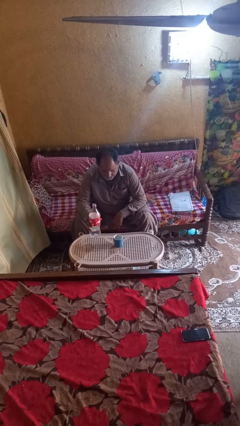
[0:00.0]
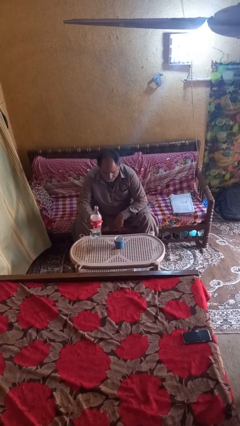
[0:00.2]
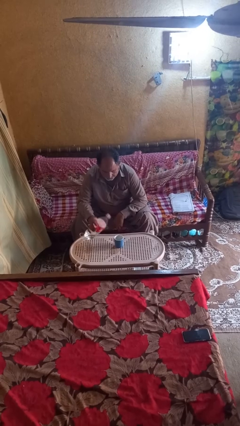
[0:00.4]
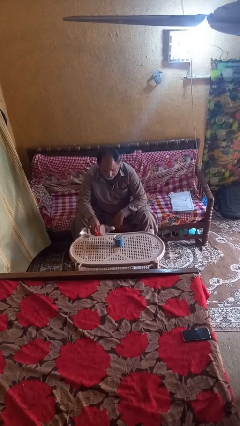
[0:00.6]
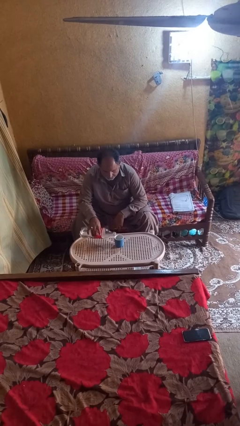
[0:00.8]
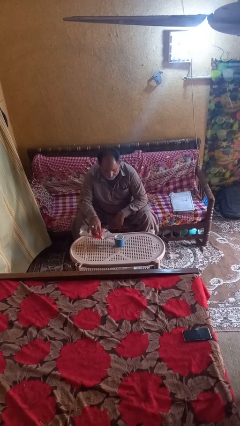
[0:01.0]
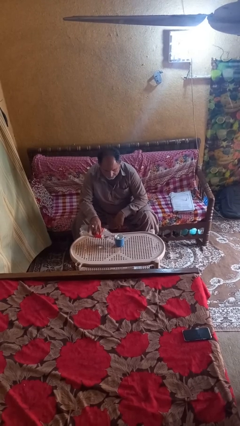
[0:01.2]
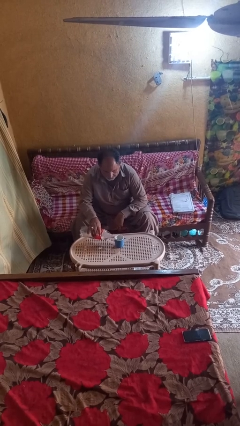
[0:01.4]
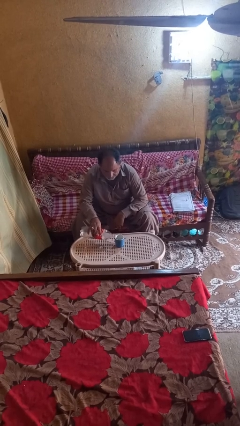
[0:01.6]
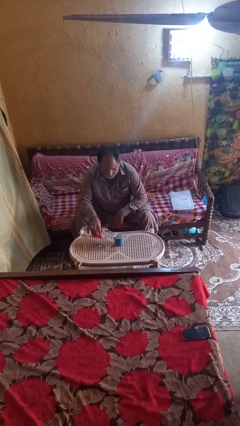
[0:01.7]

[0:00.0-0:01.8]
person pours liquid into cup

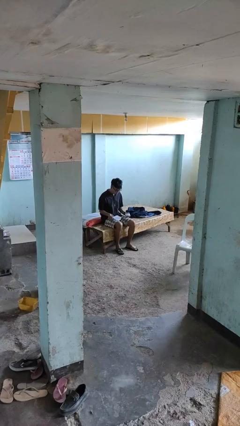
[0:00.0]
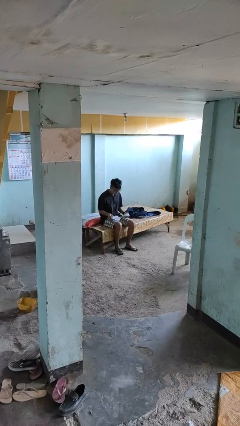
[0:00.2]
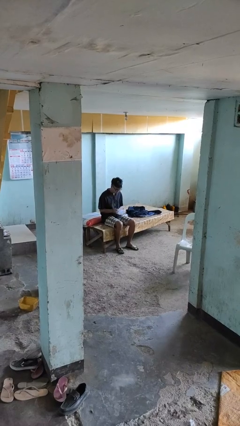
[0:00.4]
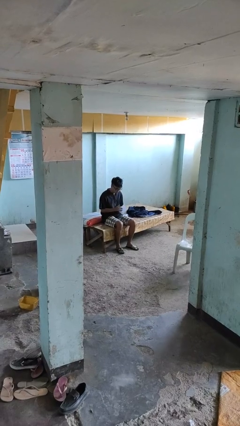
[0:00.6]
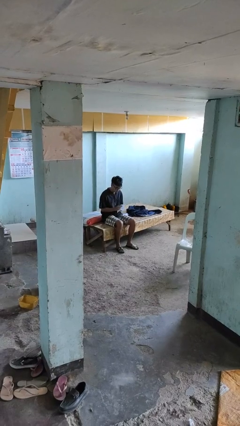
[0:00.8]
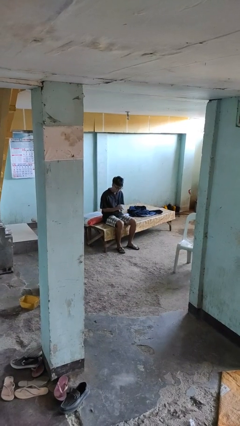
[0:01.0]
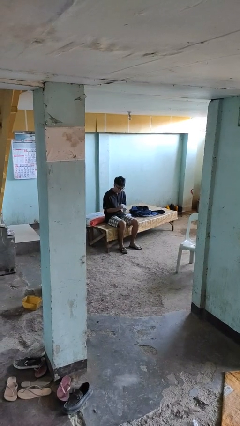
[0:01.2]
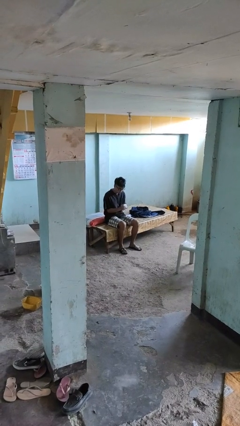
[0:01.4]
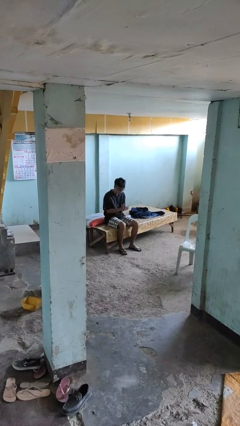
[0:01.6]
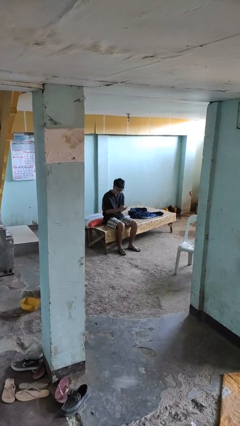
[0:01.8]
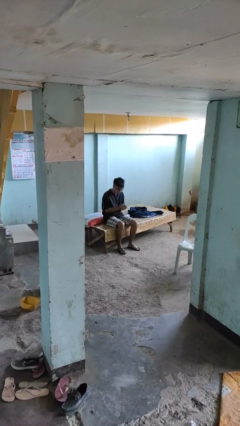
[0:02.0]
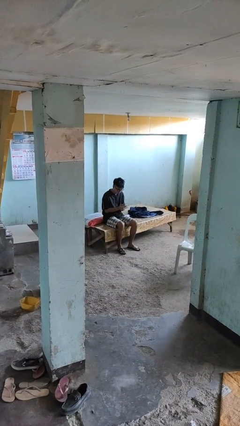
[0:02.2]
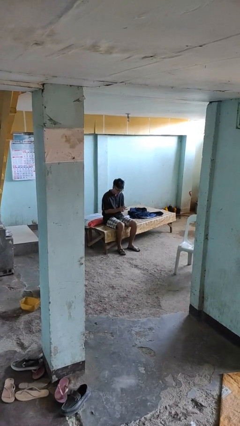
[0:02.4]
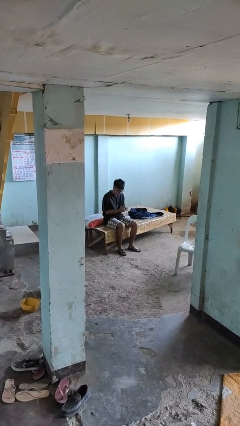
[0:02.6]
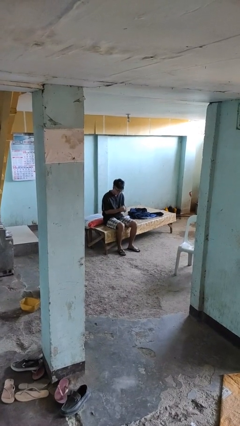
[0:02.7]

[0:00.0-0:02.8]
person crumples paper

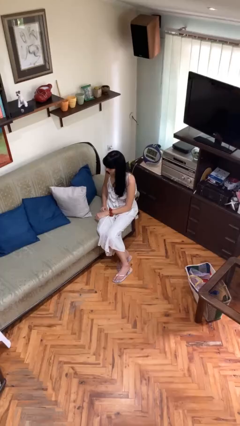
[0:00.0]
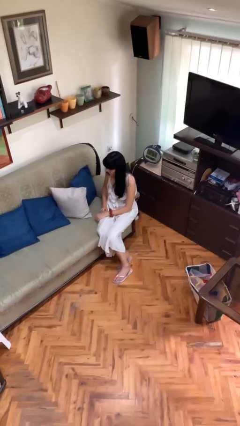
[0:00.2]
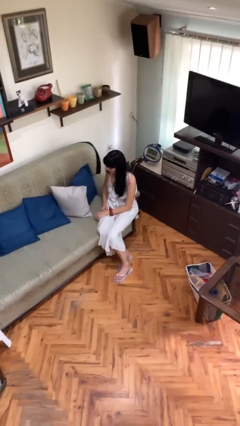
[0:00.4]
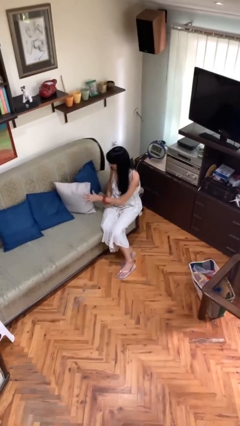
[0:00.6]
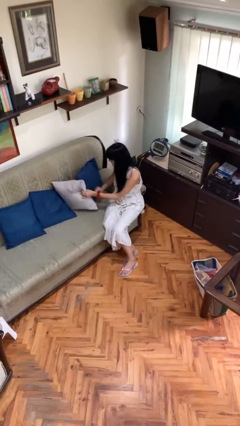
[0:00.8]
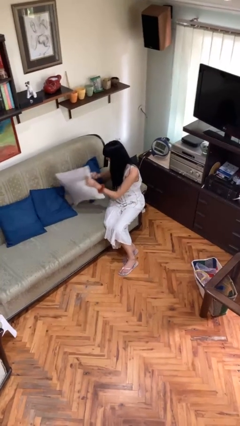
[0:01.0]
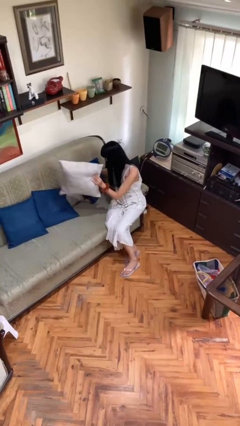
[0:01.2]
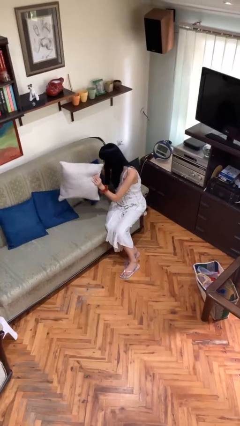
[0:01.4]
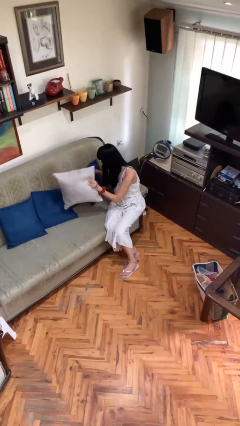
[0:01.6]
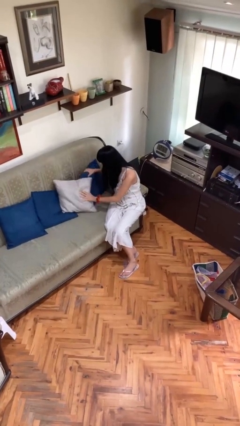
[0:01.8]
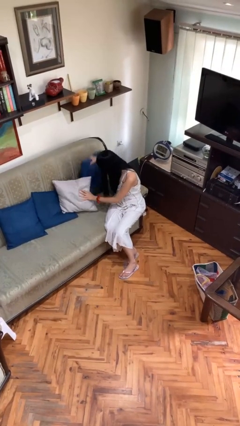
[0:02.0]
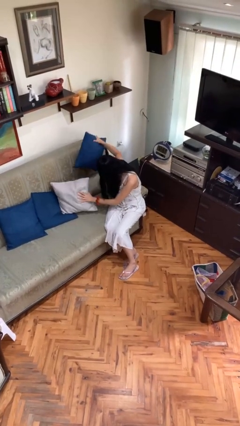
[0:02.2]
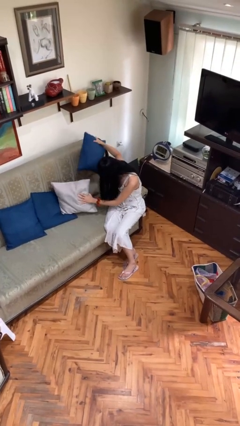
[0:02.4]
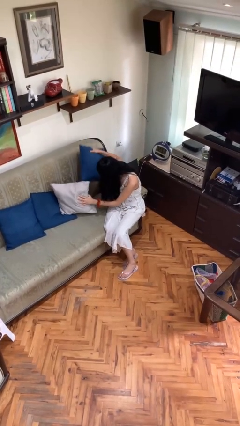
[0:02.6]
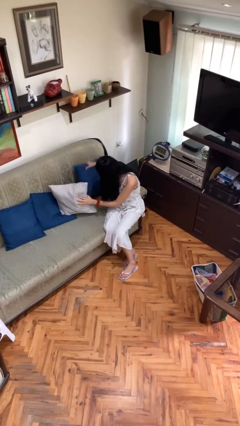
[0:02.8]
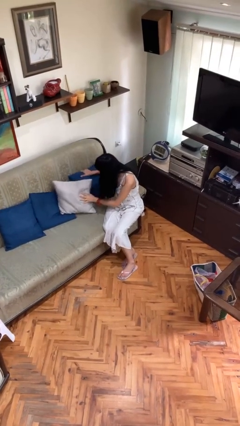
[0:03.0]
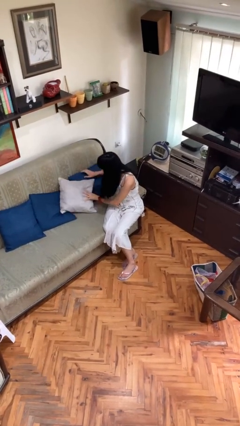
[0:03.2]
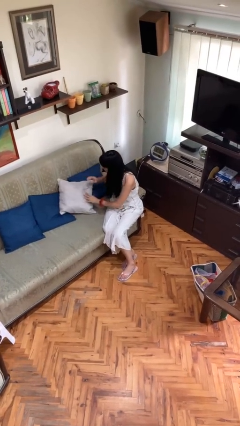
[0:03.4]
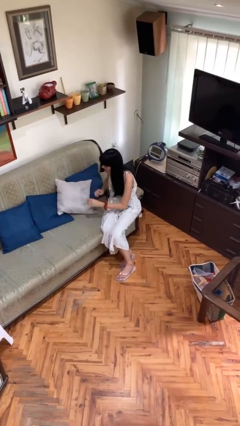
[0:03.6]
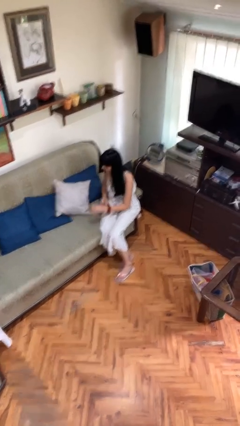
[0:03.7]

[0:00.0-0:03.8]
person searches in couch

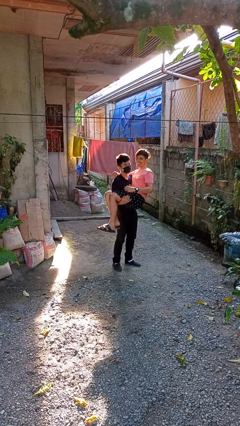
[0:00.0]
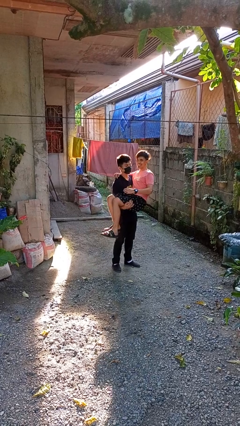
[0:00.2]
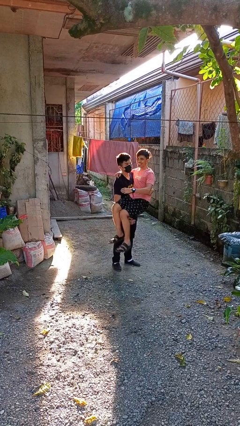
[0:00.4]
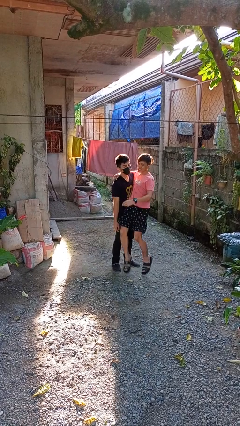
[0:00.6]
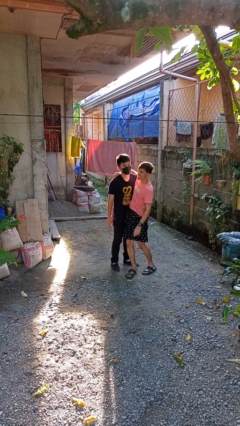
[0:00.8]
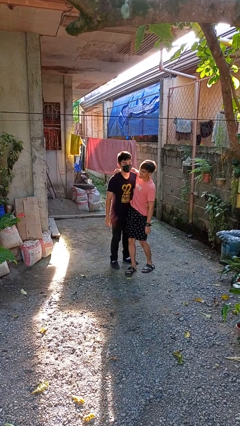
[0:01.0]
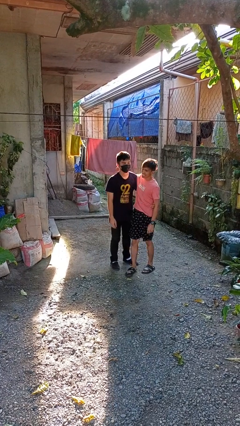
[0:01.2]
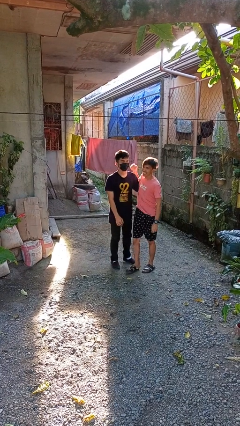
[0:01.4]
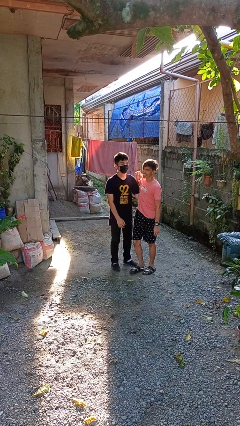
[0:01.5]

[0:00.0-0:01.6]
person puts down person

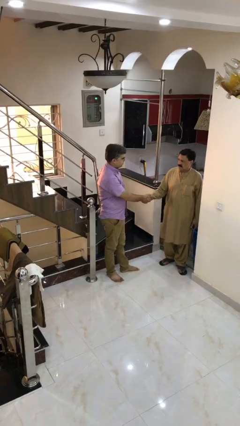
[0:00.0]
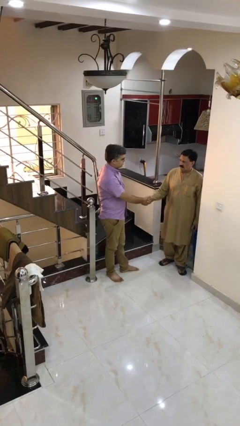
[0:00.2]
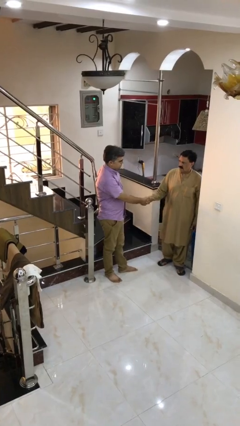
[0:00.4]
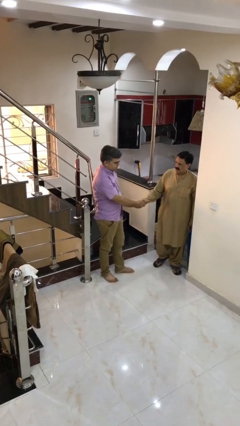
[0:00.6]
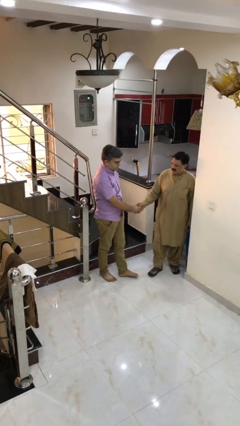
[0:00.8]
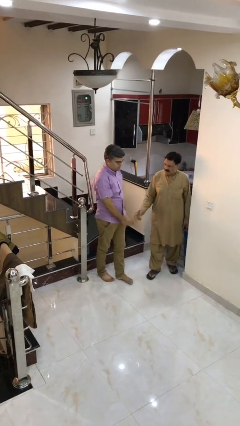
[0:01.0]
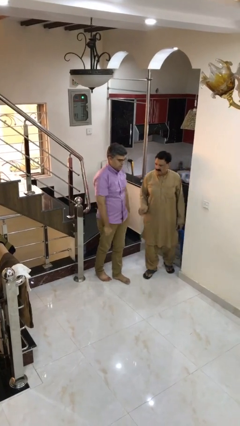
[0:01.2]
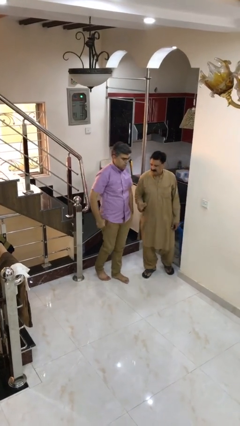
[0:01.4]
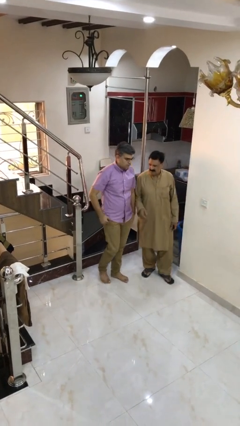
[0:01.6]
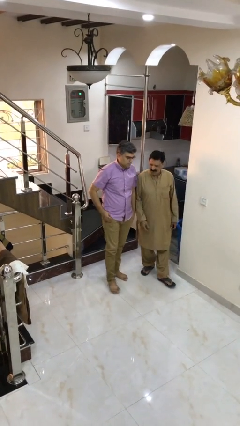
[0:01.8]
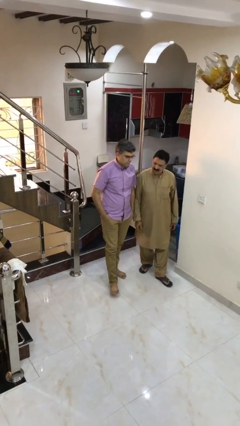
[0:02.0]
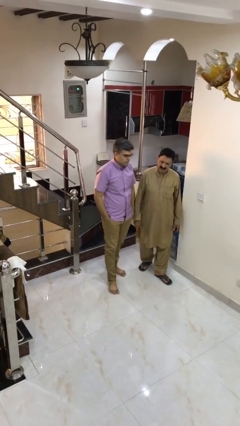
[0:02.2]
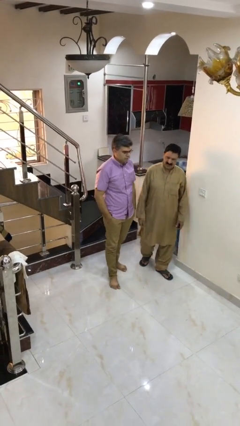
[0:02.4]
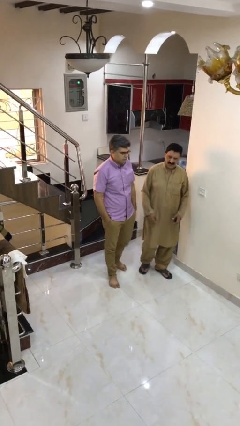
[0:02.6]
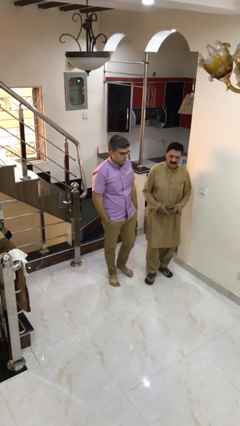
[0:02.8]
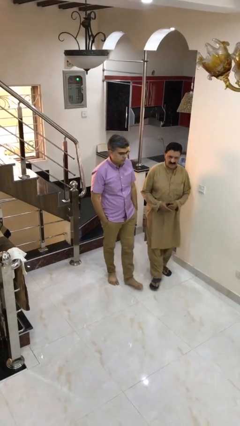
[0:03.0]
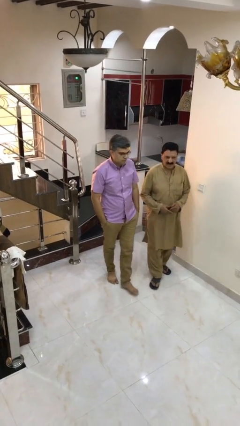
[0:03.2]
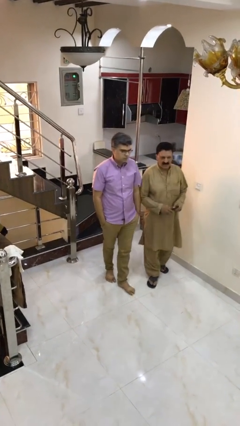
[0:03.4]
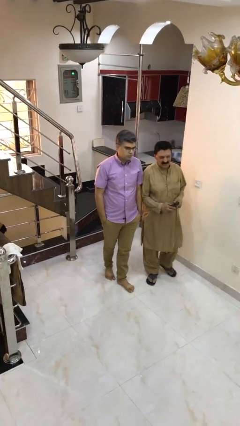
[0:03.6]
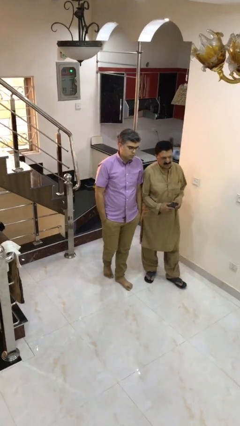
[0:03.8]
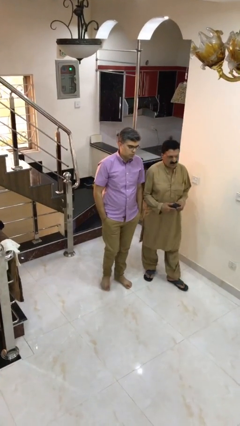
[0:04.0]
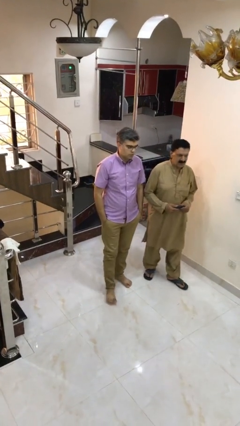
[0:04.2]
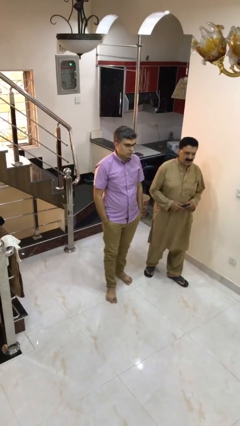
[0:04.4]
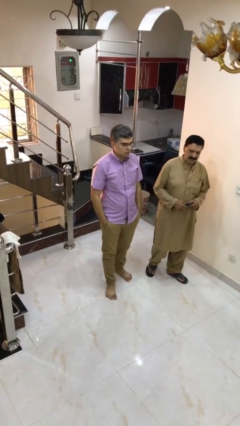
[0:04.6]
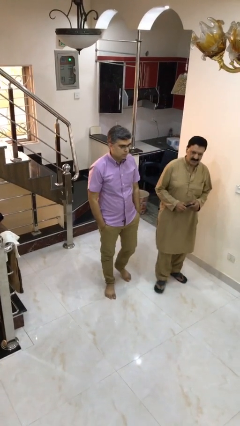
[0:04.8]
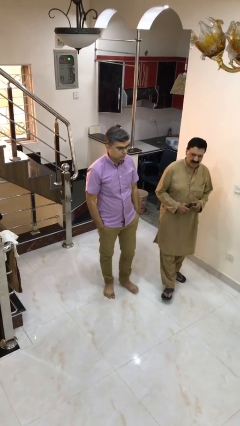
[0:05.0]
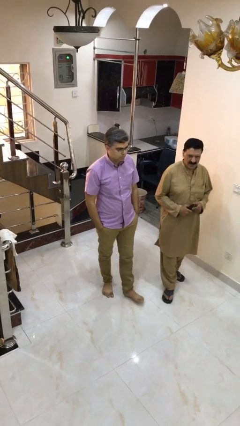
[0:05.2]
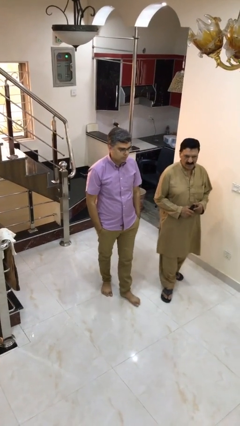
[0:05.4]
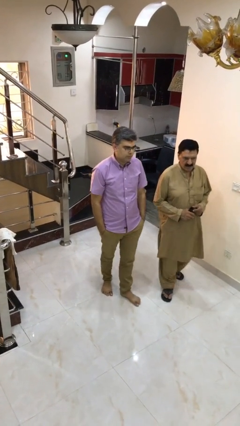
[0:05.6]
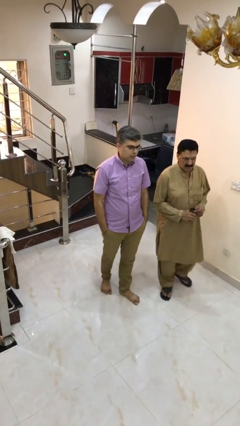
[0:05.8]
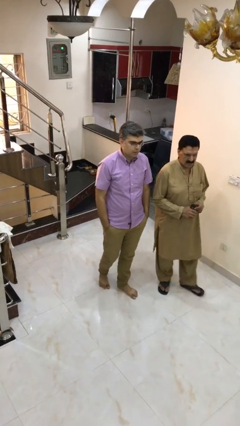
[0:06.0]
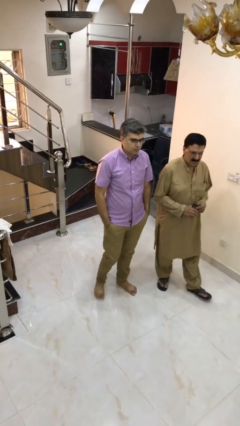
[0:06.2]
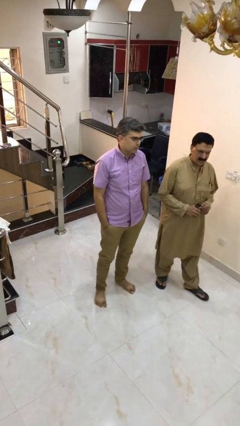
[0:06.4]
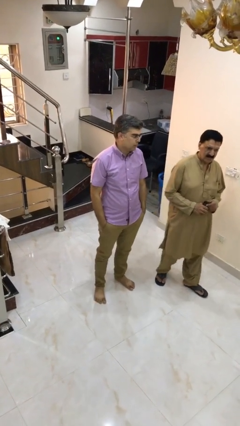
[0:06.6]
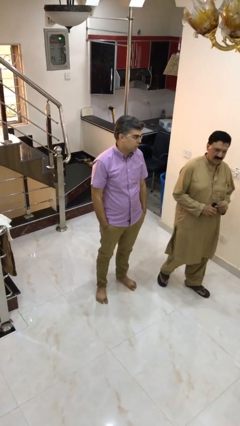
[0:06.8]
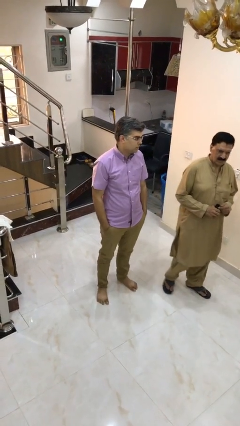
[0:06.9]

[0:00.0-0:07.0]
person talks to person

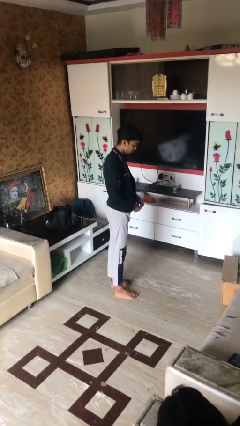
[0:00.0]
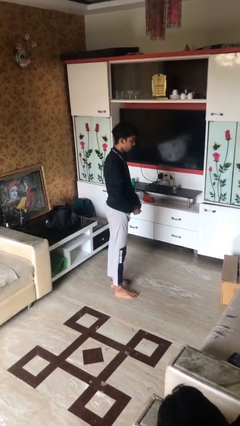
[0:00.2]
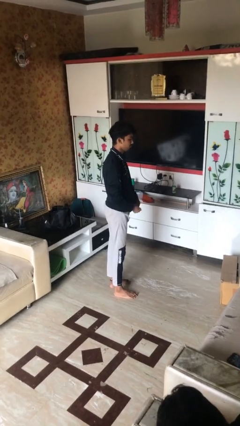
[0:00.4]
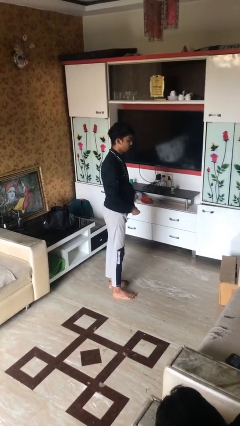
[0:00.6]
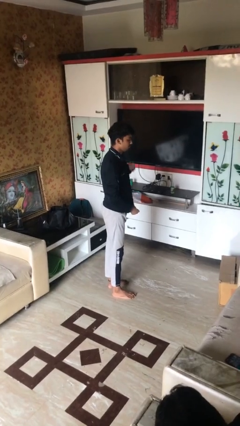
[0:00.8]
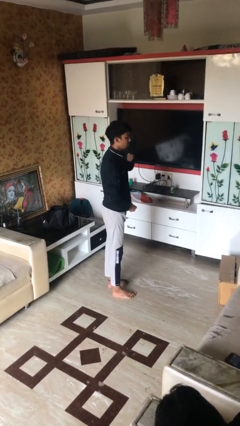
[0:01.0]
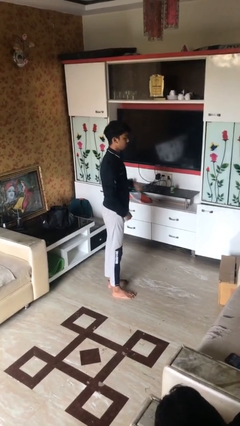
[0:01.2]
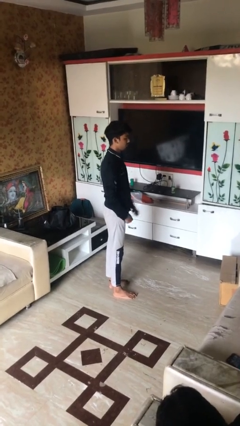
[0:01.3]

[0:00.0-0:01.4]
person zips up jacket
